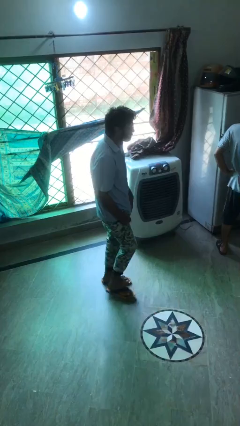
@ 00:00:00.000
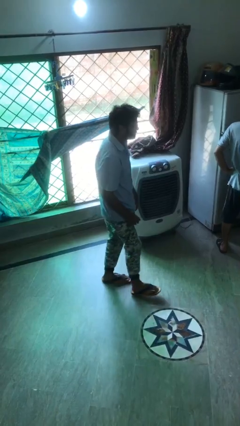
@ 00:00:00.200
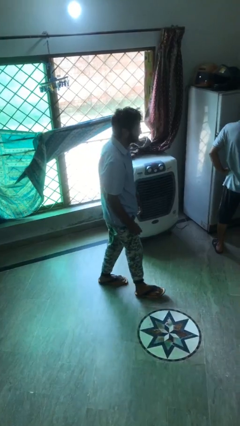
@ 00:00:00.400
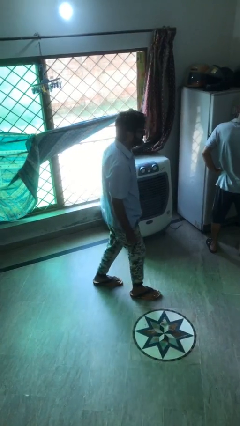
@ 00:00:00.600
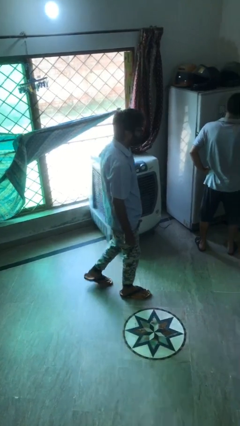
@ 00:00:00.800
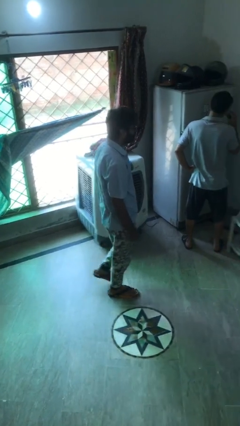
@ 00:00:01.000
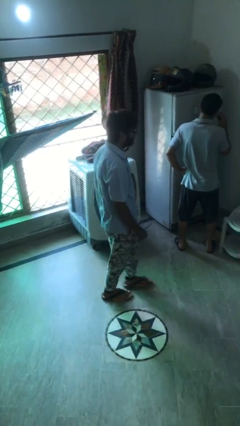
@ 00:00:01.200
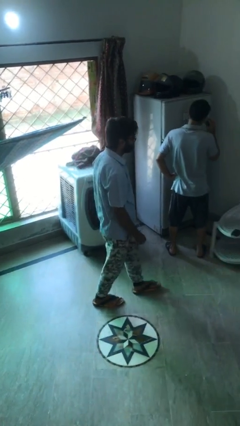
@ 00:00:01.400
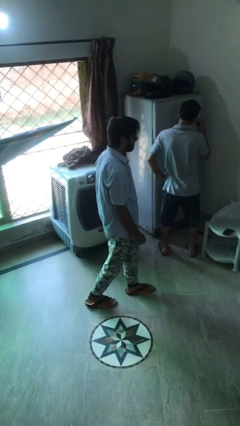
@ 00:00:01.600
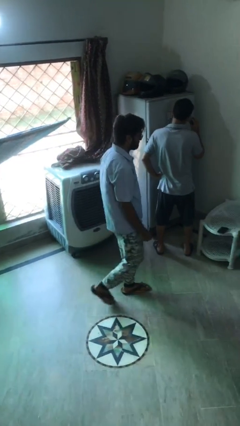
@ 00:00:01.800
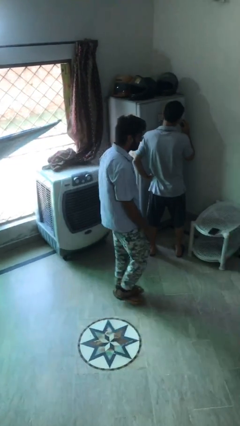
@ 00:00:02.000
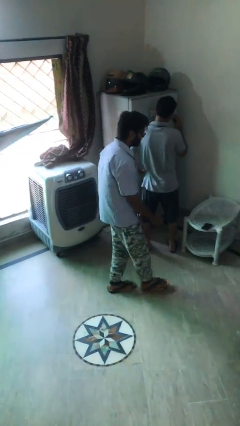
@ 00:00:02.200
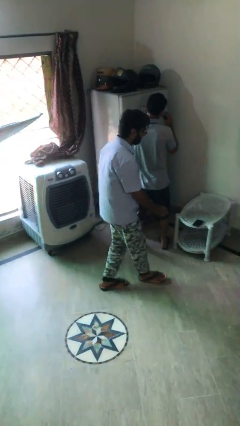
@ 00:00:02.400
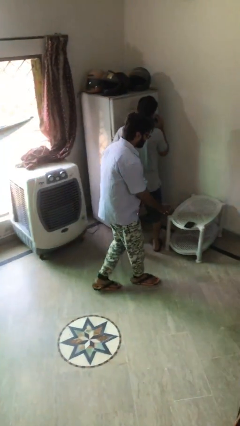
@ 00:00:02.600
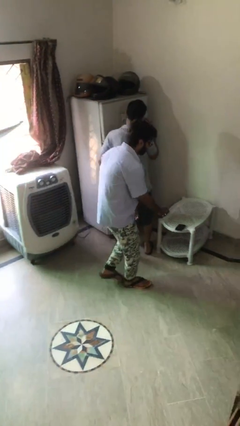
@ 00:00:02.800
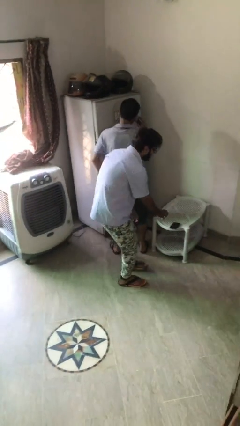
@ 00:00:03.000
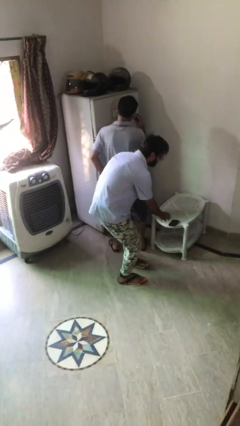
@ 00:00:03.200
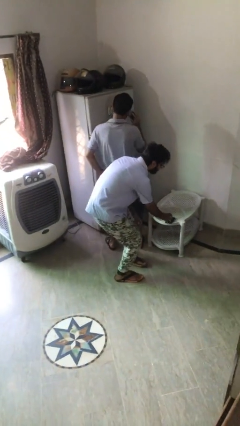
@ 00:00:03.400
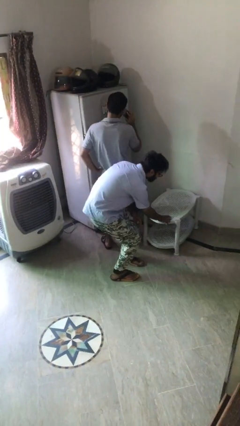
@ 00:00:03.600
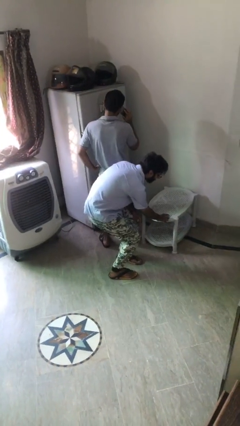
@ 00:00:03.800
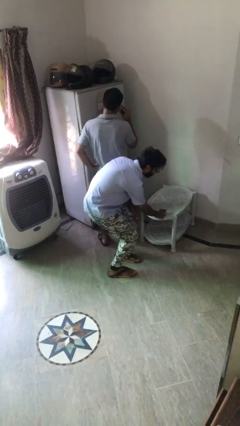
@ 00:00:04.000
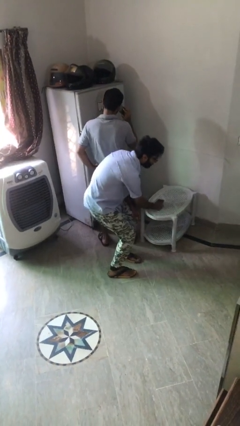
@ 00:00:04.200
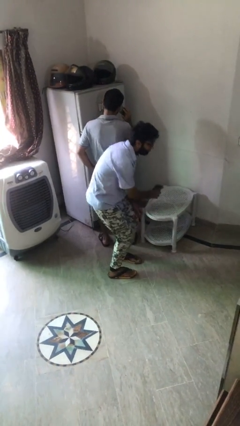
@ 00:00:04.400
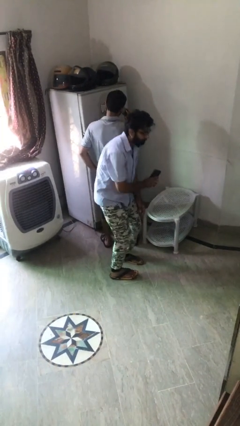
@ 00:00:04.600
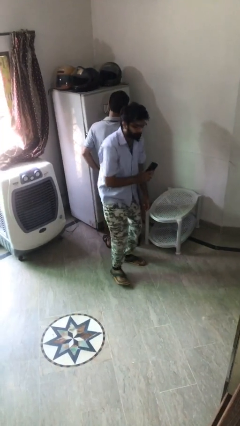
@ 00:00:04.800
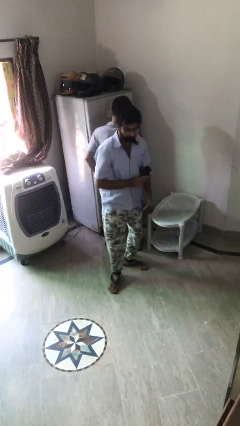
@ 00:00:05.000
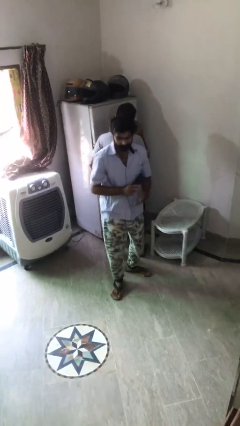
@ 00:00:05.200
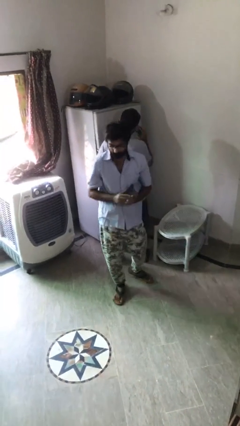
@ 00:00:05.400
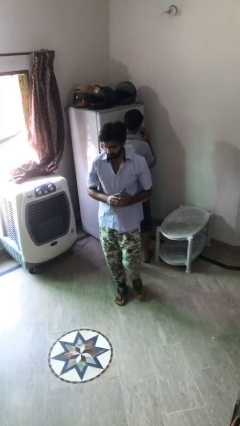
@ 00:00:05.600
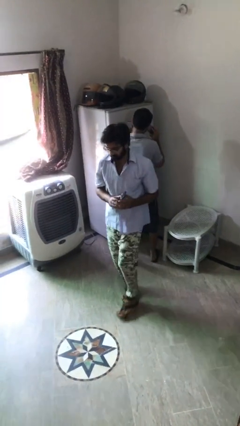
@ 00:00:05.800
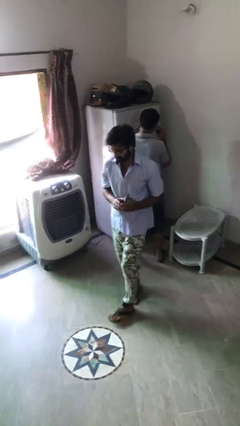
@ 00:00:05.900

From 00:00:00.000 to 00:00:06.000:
person steals object from person

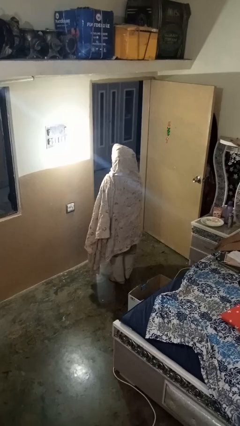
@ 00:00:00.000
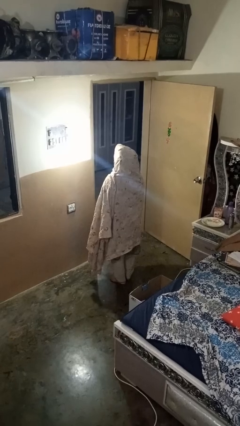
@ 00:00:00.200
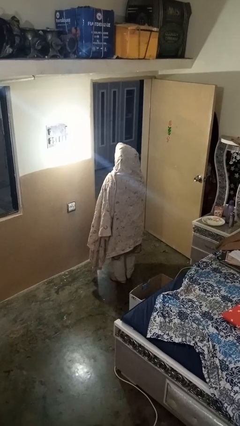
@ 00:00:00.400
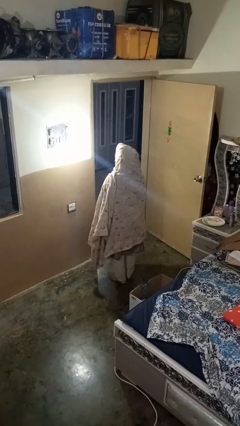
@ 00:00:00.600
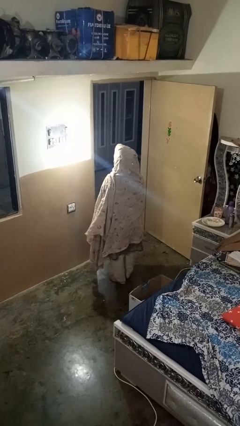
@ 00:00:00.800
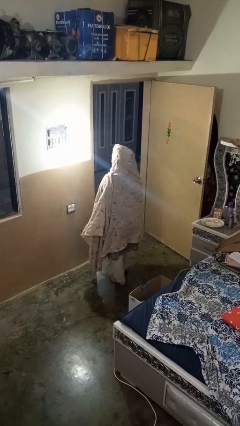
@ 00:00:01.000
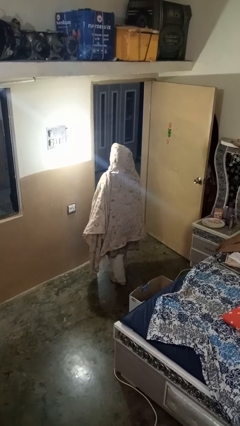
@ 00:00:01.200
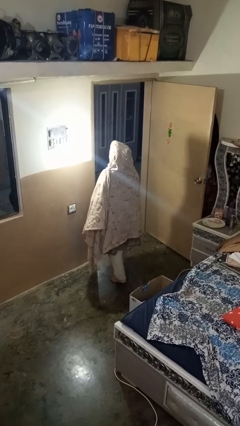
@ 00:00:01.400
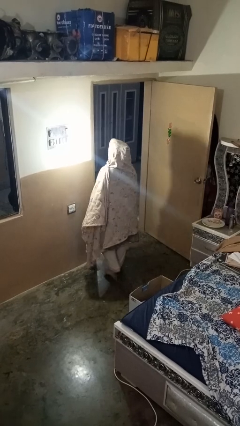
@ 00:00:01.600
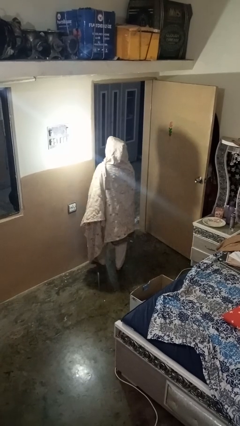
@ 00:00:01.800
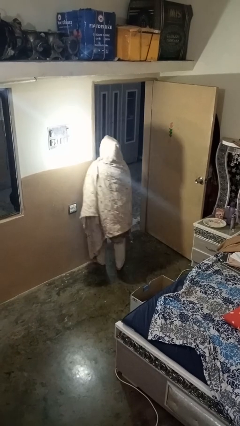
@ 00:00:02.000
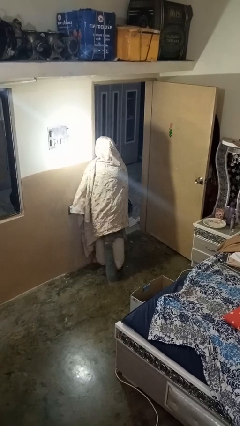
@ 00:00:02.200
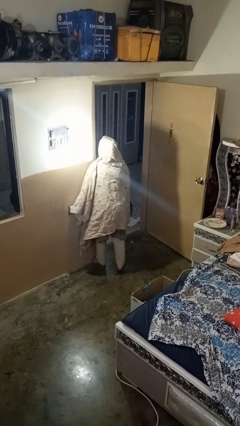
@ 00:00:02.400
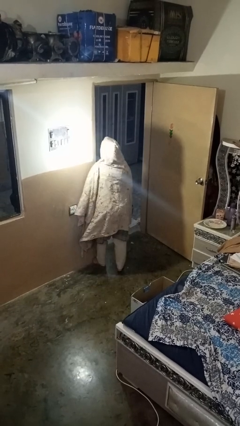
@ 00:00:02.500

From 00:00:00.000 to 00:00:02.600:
person bumps into wall

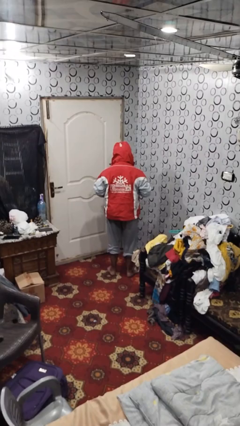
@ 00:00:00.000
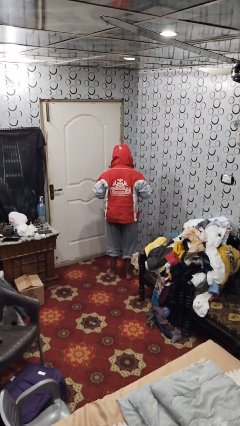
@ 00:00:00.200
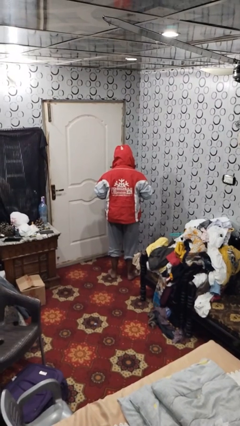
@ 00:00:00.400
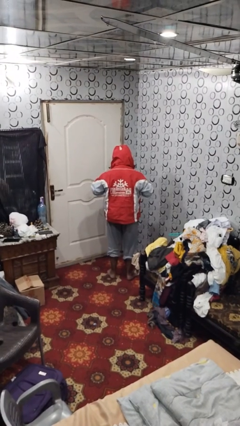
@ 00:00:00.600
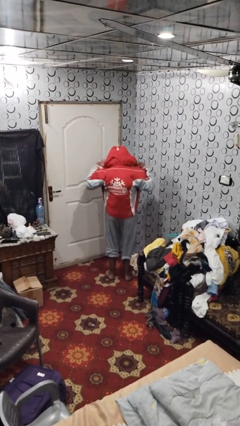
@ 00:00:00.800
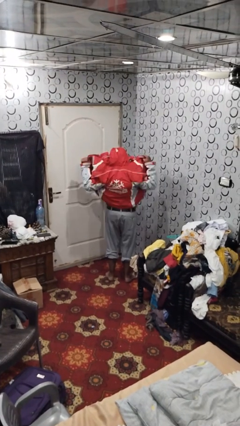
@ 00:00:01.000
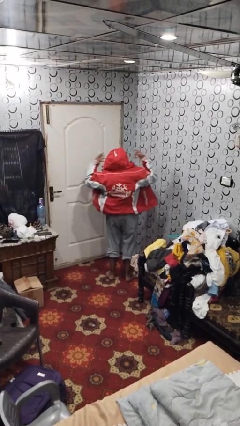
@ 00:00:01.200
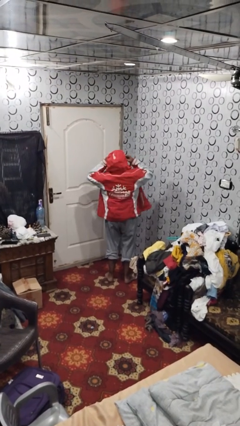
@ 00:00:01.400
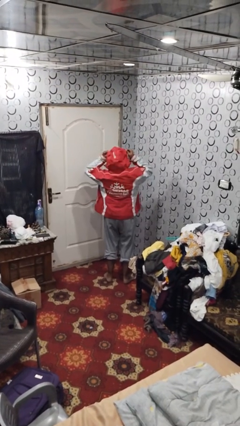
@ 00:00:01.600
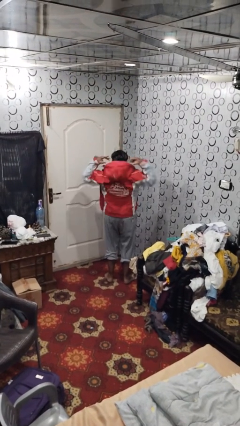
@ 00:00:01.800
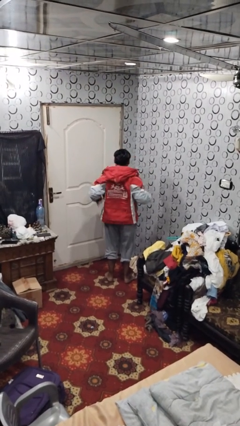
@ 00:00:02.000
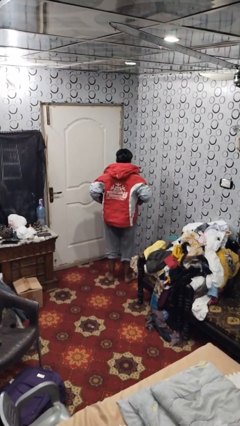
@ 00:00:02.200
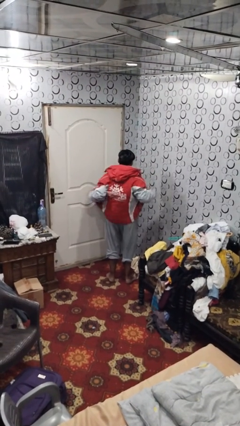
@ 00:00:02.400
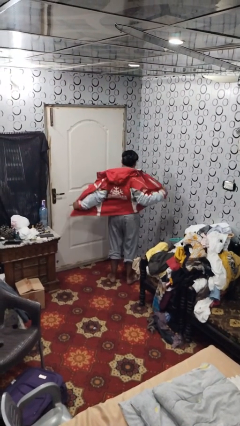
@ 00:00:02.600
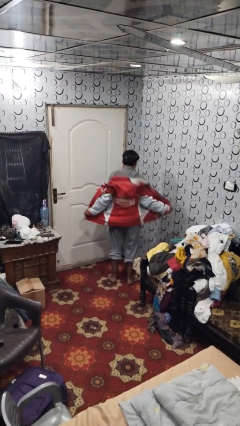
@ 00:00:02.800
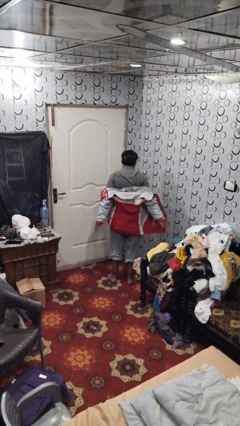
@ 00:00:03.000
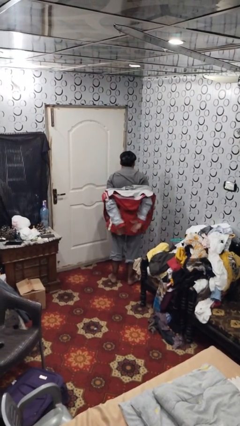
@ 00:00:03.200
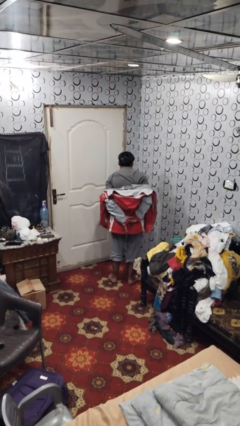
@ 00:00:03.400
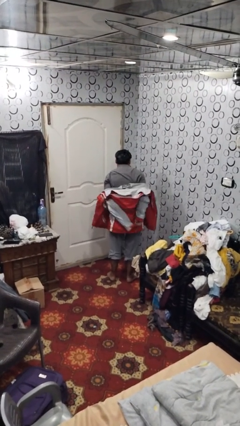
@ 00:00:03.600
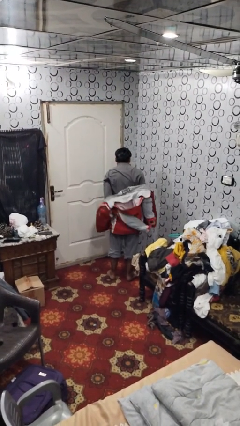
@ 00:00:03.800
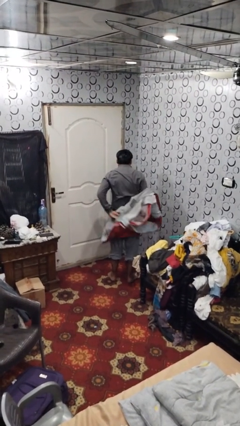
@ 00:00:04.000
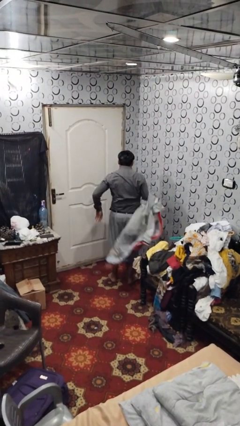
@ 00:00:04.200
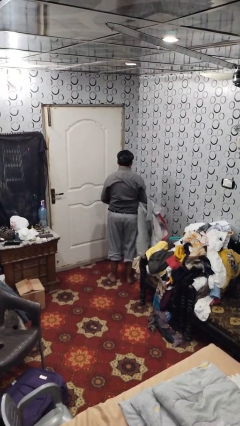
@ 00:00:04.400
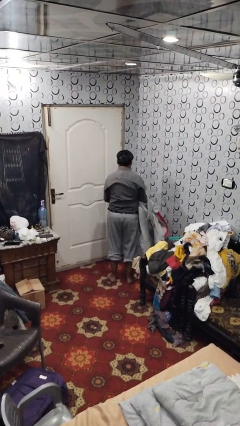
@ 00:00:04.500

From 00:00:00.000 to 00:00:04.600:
person takes off hoodie

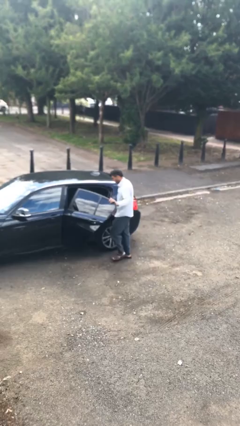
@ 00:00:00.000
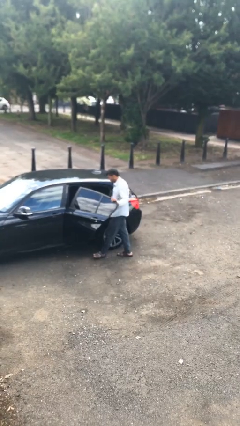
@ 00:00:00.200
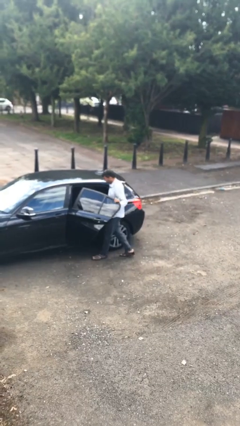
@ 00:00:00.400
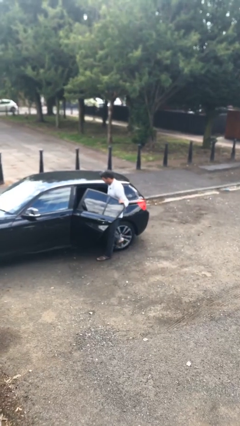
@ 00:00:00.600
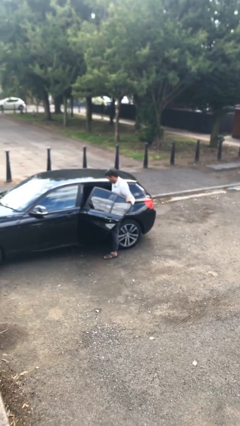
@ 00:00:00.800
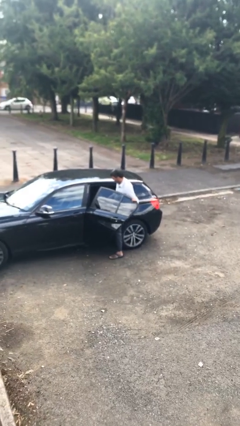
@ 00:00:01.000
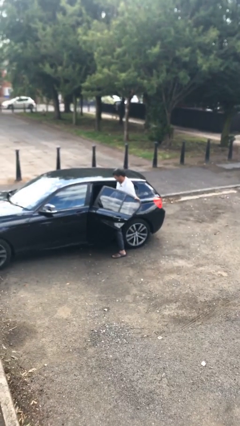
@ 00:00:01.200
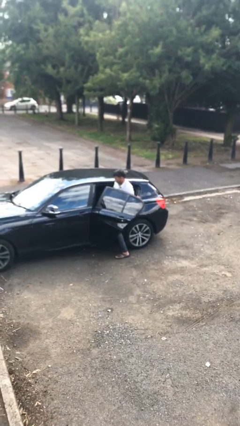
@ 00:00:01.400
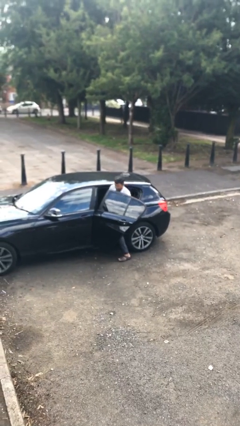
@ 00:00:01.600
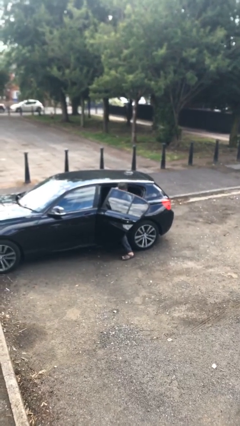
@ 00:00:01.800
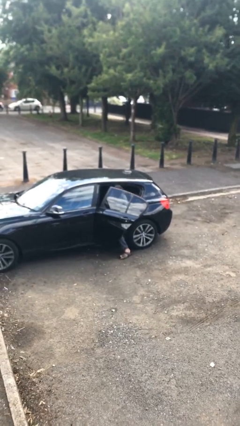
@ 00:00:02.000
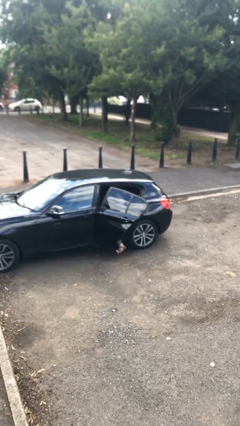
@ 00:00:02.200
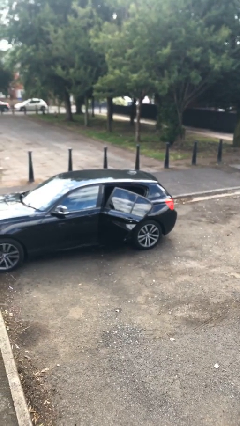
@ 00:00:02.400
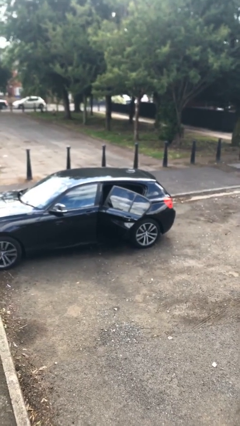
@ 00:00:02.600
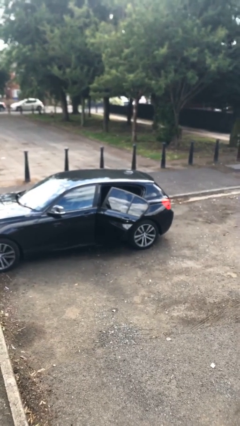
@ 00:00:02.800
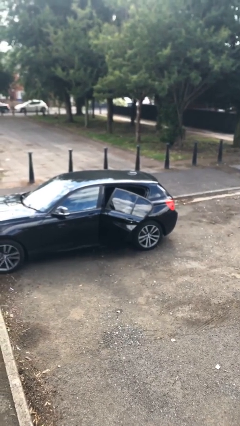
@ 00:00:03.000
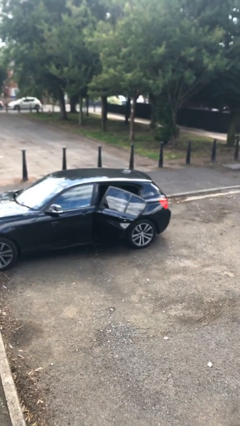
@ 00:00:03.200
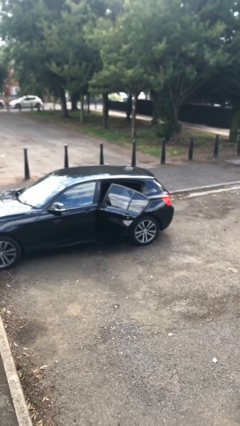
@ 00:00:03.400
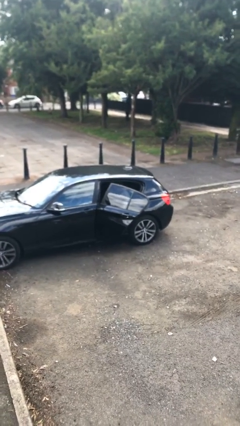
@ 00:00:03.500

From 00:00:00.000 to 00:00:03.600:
person enters car

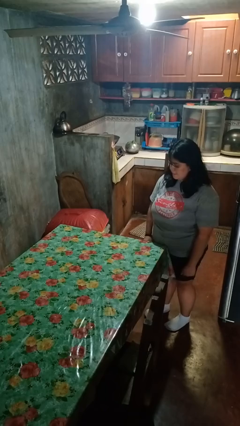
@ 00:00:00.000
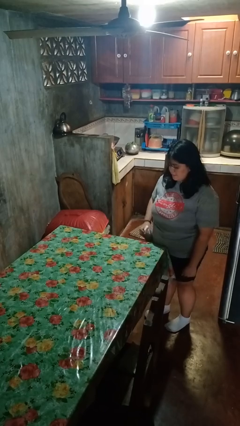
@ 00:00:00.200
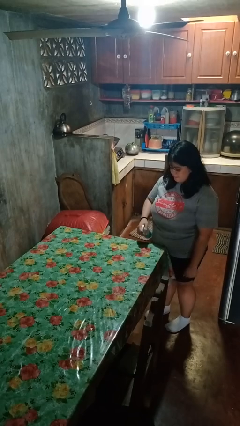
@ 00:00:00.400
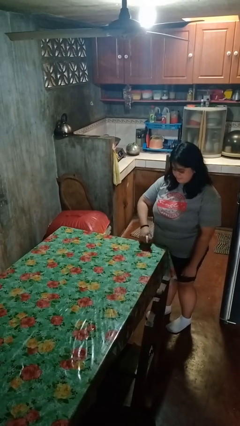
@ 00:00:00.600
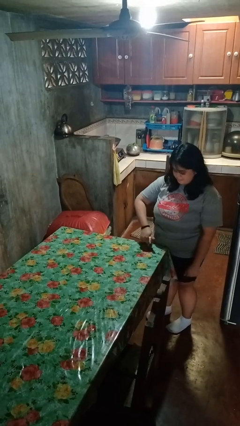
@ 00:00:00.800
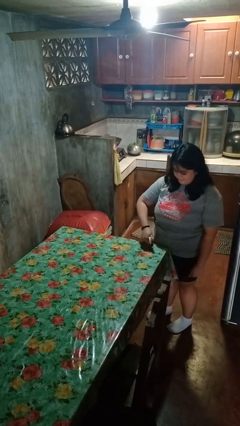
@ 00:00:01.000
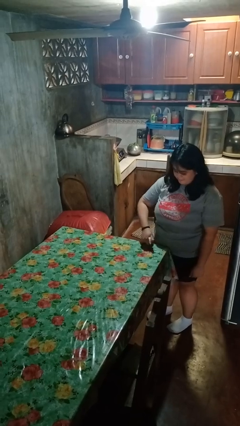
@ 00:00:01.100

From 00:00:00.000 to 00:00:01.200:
person sprays from bottle
